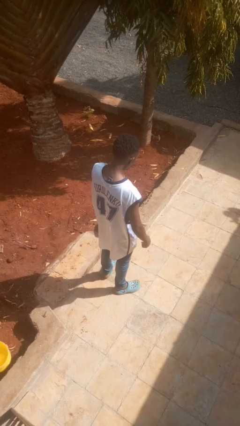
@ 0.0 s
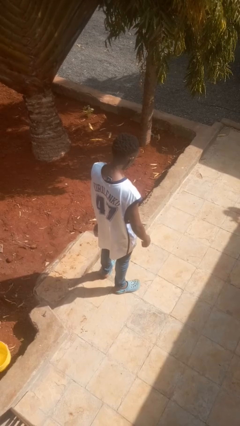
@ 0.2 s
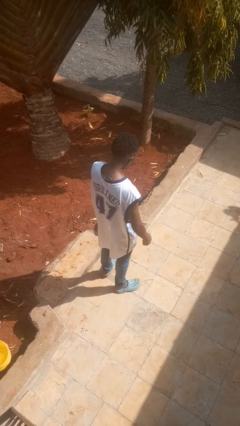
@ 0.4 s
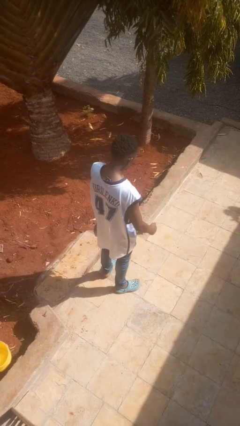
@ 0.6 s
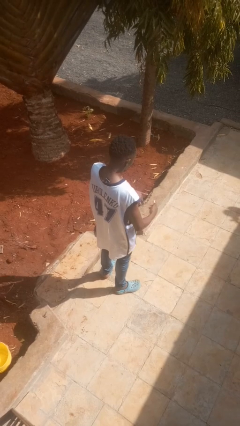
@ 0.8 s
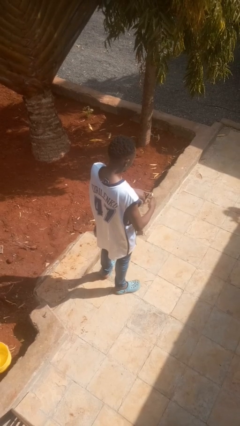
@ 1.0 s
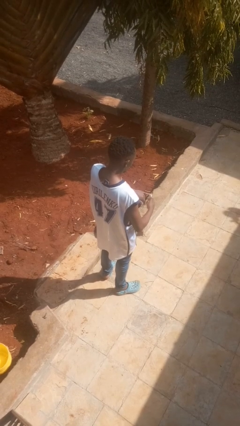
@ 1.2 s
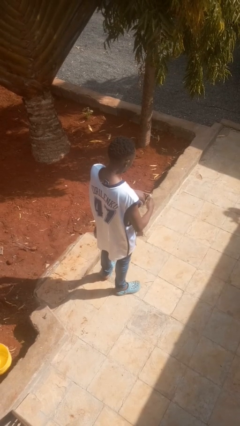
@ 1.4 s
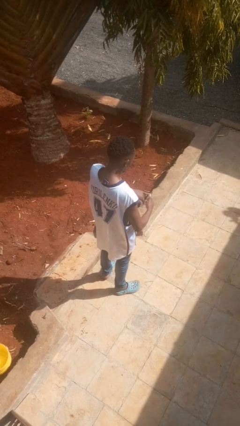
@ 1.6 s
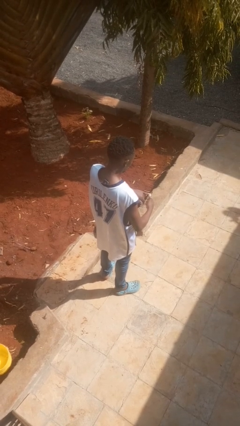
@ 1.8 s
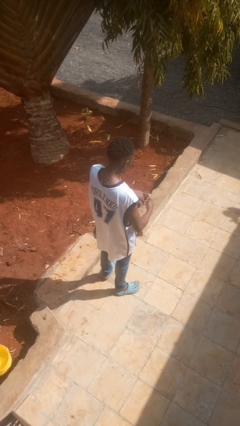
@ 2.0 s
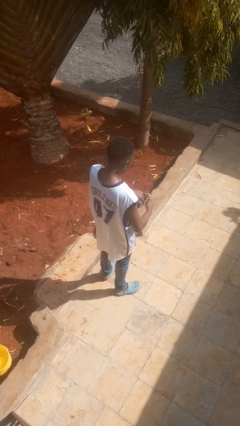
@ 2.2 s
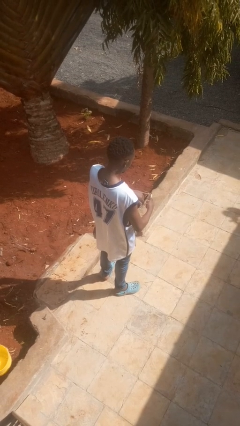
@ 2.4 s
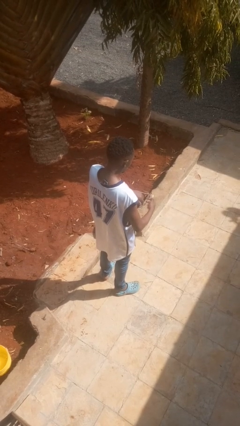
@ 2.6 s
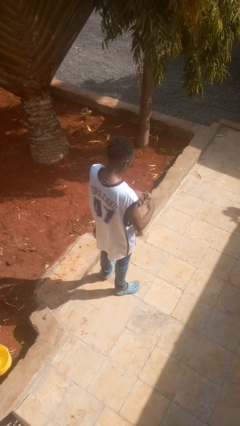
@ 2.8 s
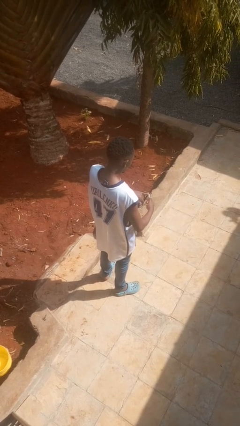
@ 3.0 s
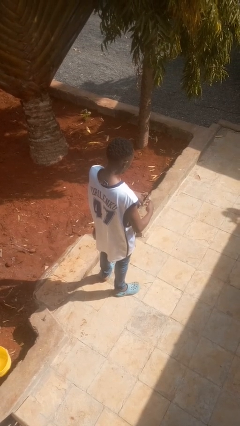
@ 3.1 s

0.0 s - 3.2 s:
person clips fingernails

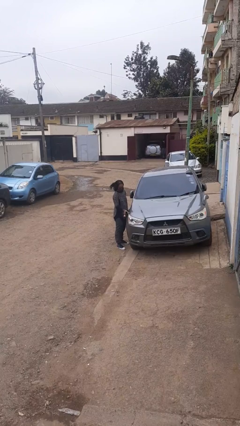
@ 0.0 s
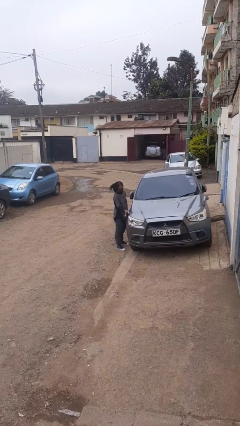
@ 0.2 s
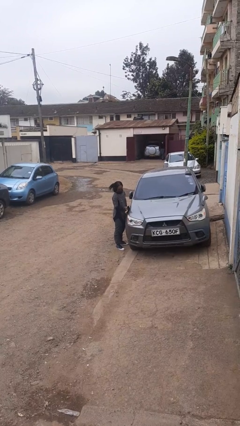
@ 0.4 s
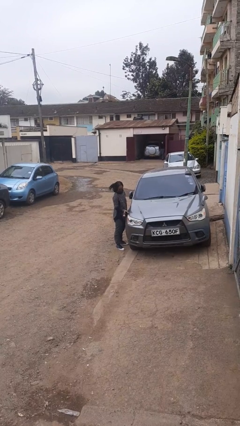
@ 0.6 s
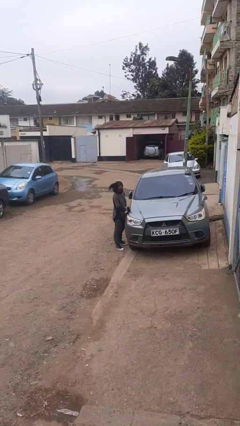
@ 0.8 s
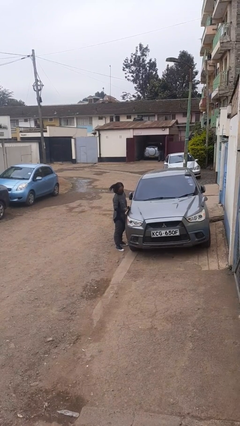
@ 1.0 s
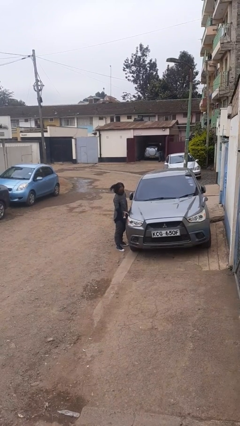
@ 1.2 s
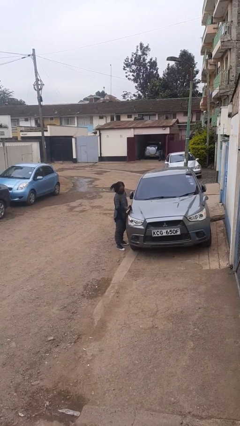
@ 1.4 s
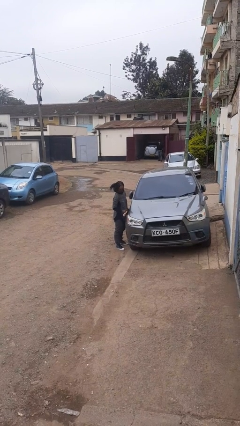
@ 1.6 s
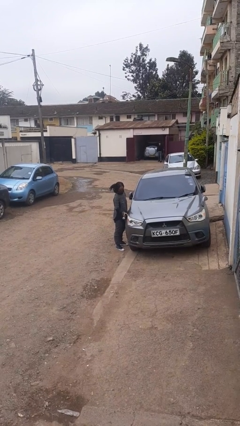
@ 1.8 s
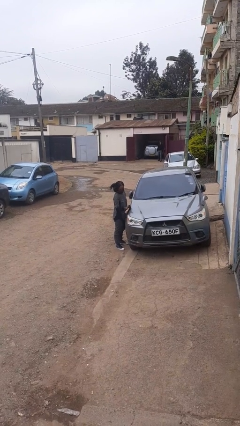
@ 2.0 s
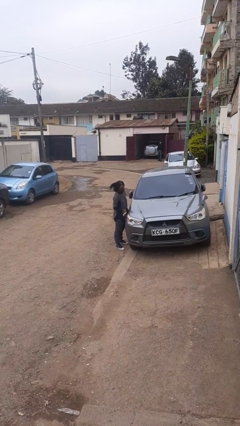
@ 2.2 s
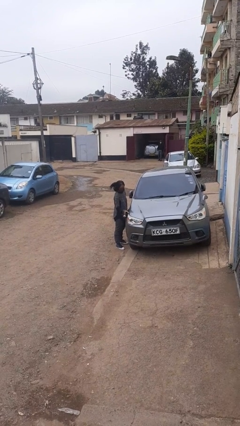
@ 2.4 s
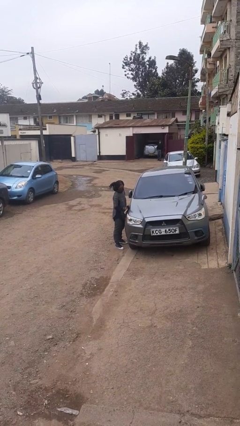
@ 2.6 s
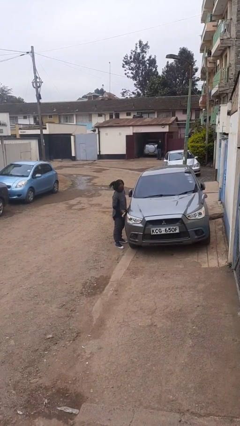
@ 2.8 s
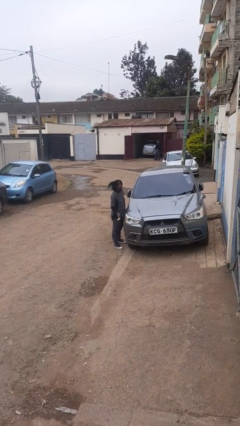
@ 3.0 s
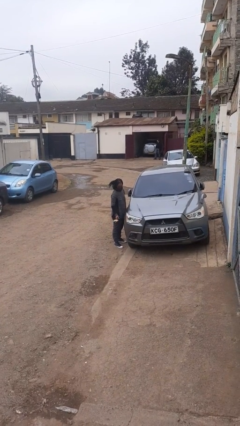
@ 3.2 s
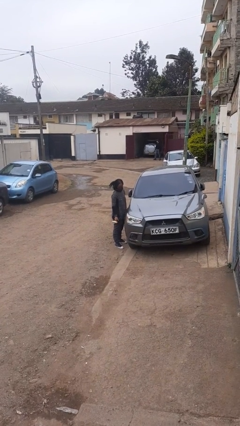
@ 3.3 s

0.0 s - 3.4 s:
person polishes car with rag

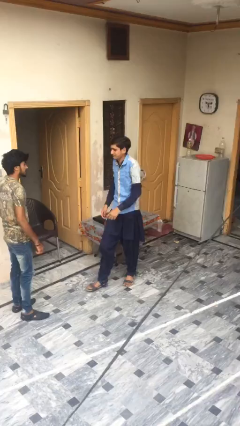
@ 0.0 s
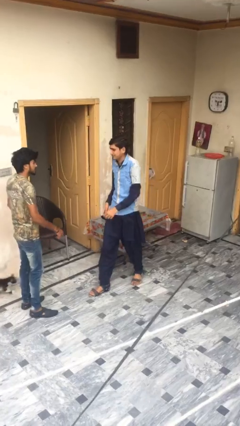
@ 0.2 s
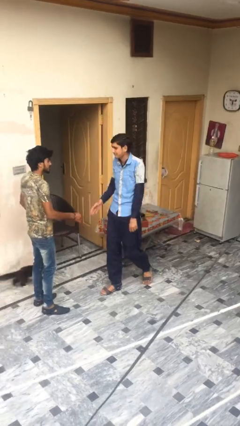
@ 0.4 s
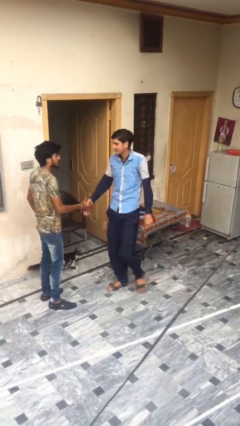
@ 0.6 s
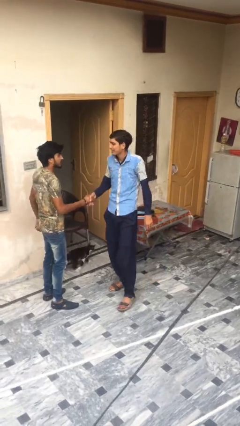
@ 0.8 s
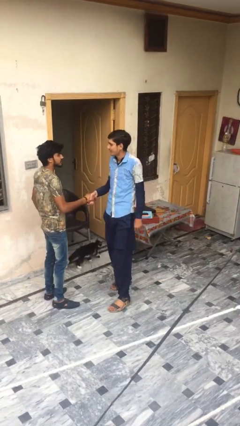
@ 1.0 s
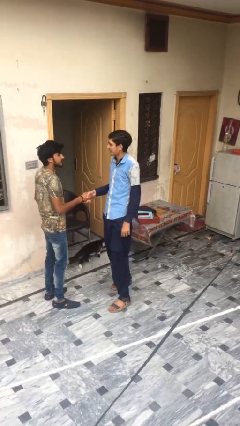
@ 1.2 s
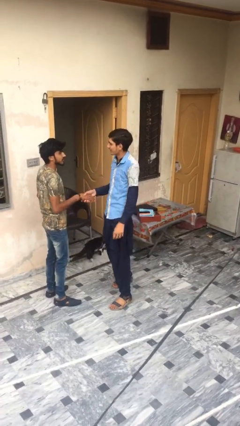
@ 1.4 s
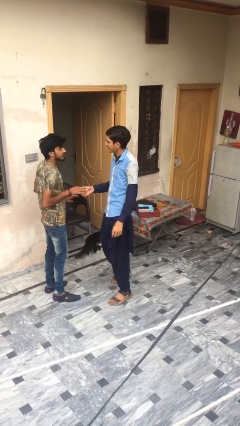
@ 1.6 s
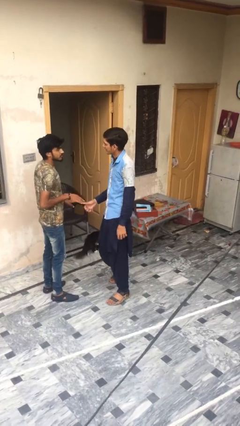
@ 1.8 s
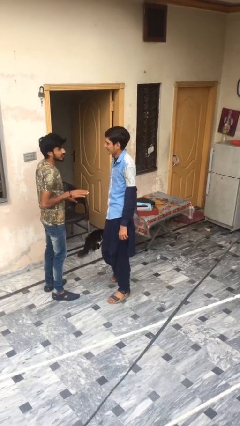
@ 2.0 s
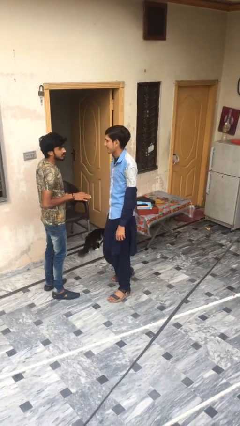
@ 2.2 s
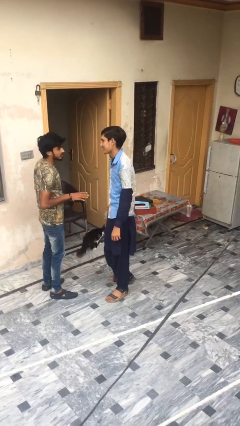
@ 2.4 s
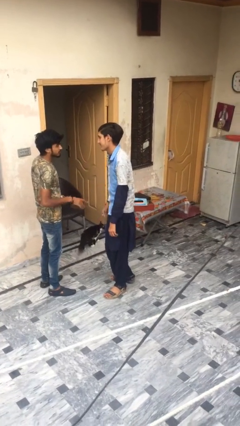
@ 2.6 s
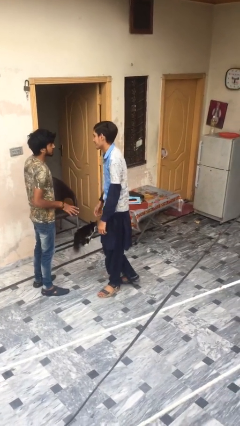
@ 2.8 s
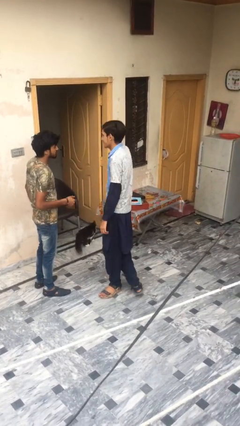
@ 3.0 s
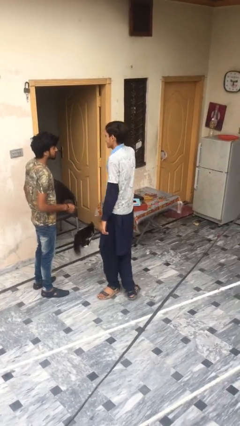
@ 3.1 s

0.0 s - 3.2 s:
person shakes hand

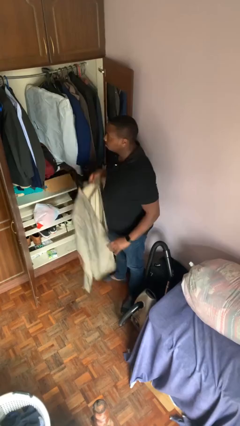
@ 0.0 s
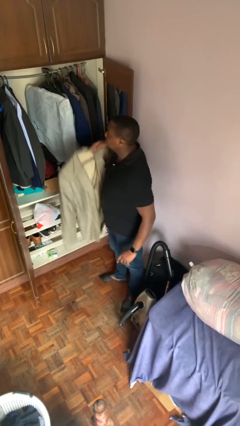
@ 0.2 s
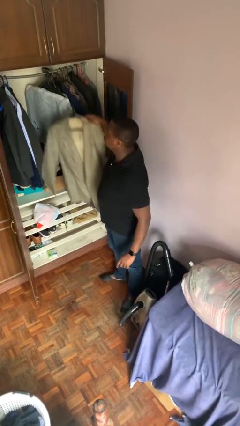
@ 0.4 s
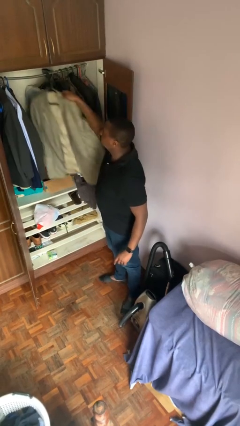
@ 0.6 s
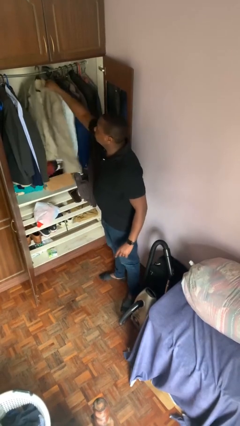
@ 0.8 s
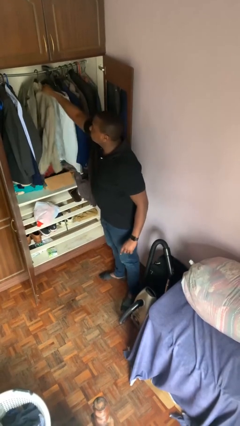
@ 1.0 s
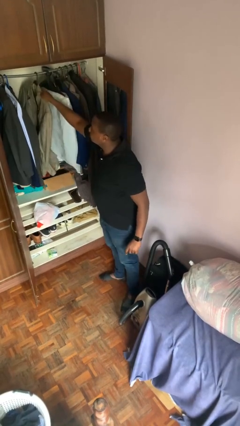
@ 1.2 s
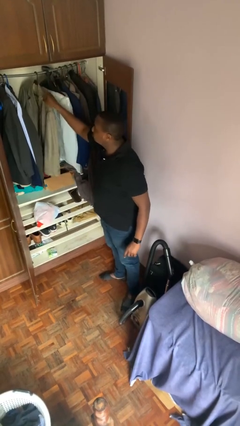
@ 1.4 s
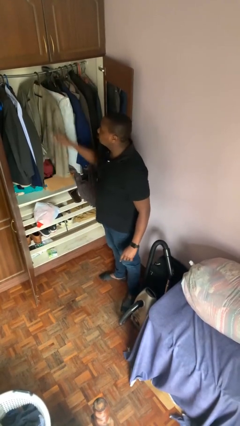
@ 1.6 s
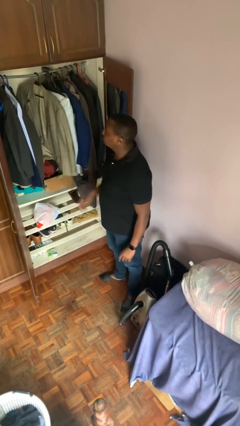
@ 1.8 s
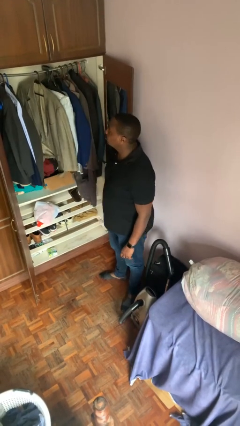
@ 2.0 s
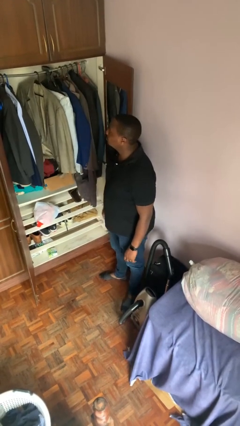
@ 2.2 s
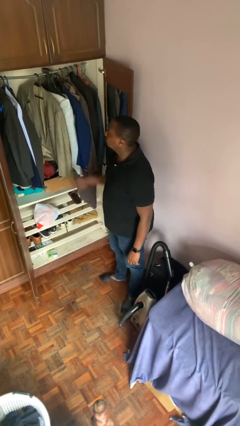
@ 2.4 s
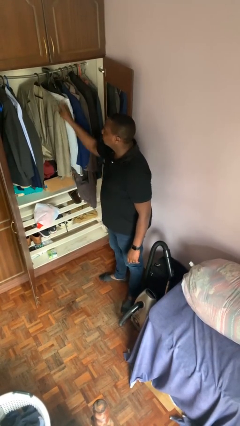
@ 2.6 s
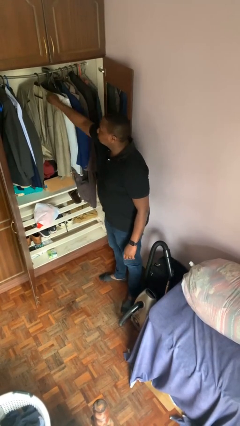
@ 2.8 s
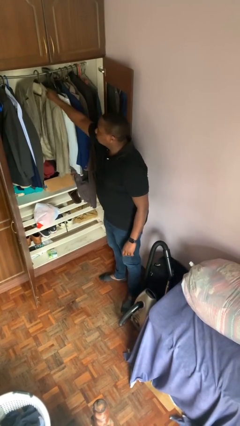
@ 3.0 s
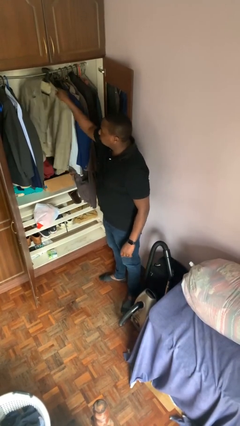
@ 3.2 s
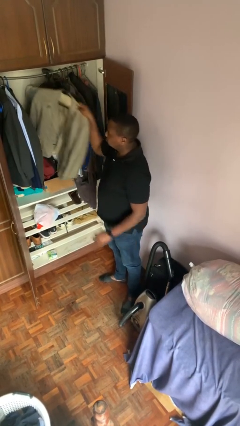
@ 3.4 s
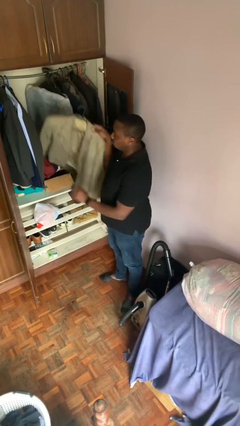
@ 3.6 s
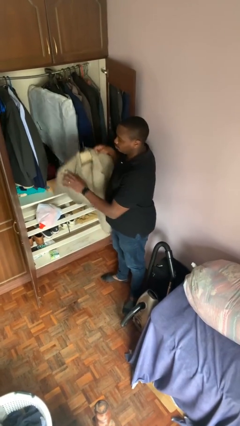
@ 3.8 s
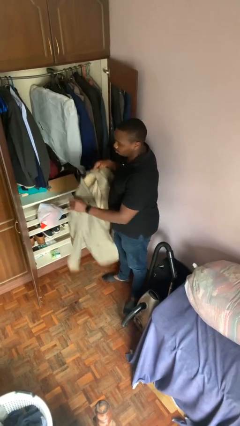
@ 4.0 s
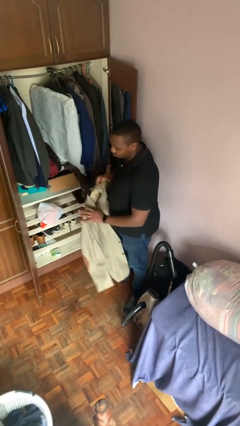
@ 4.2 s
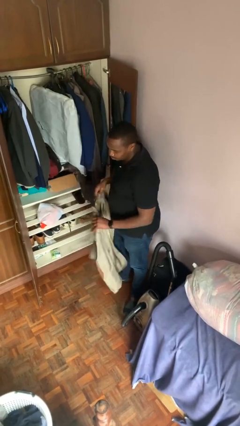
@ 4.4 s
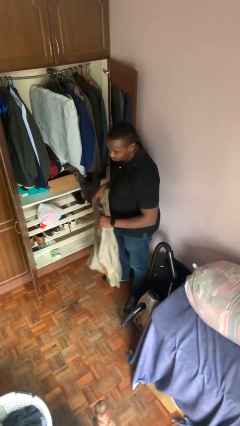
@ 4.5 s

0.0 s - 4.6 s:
person puts clothes into closet

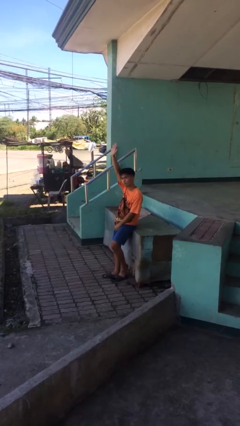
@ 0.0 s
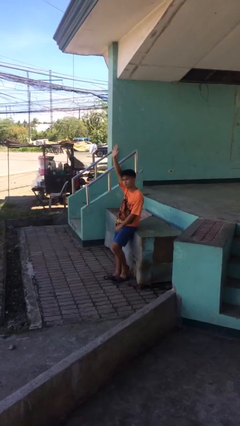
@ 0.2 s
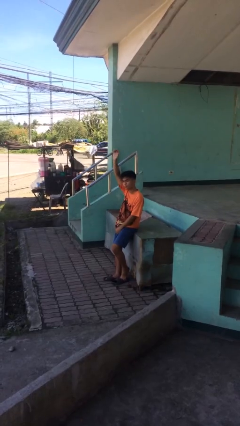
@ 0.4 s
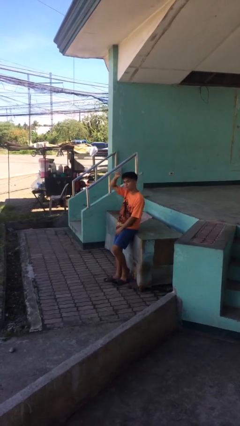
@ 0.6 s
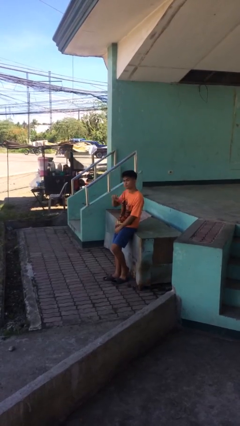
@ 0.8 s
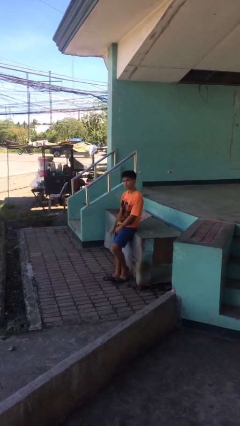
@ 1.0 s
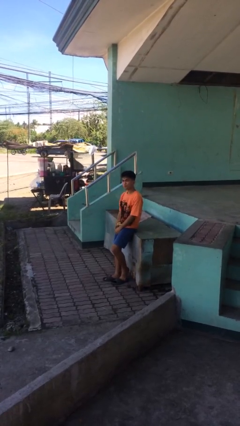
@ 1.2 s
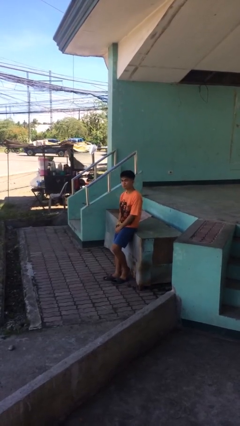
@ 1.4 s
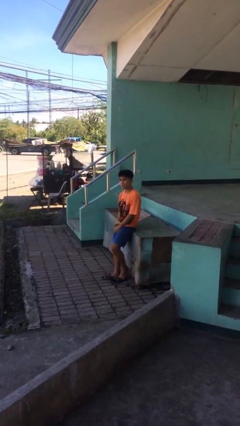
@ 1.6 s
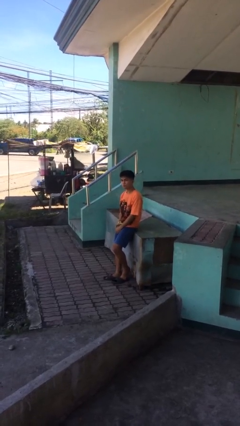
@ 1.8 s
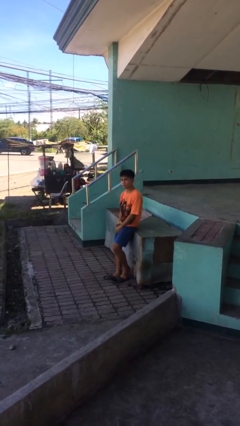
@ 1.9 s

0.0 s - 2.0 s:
person gestures lower hand

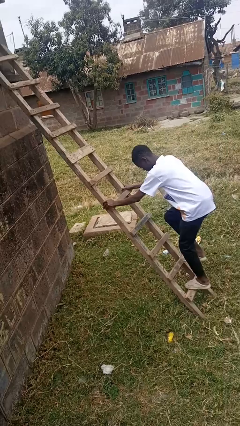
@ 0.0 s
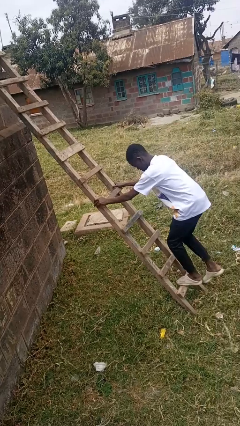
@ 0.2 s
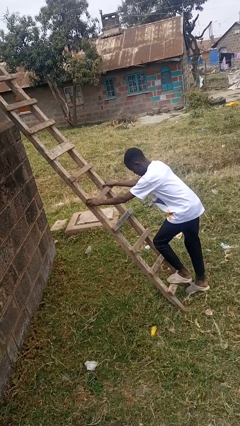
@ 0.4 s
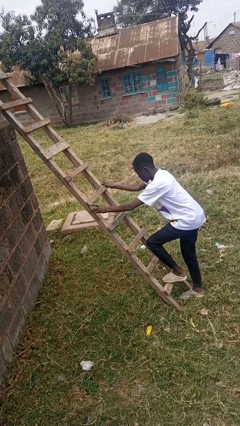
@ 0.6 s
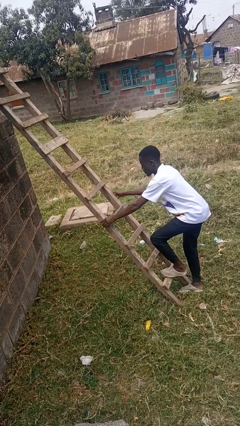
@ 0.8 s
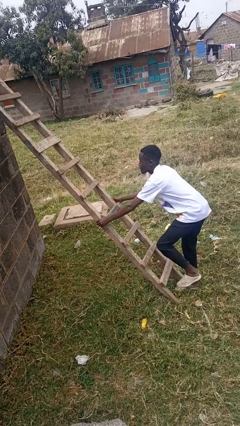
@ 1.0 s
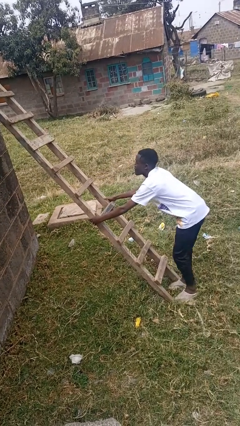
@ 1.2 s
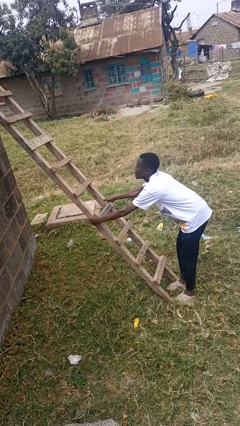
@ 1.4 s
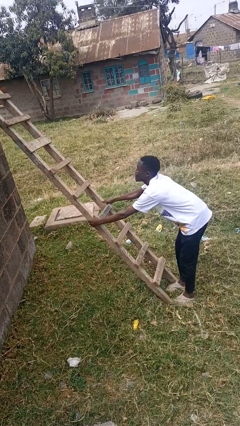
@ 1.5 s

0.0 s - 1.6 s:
person climbs down ladder
